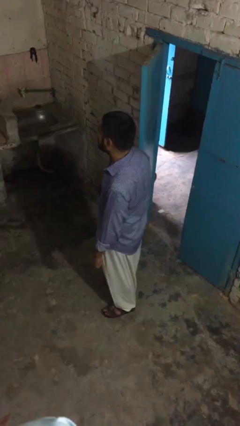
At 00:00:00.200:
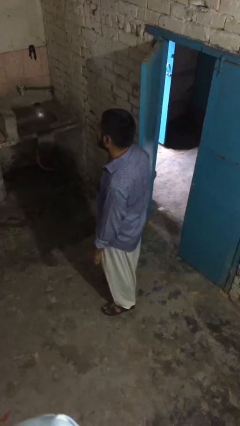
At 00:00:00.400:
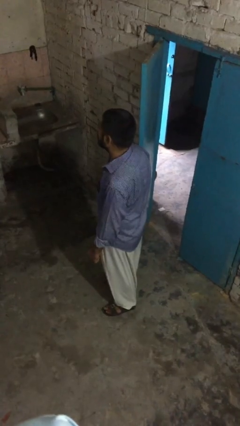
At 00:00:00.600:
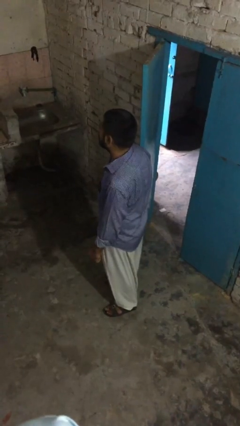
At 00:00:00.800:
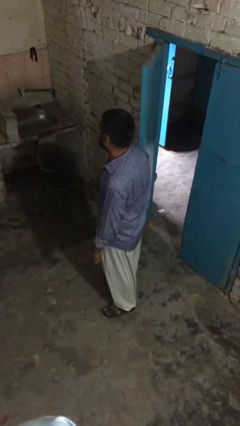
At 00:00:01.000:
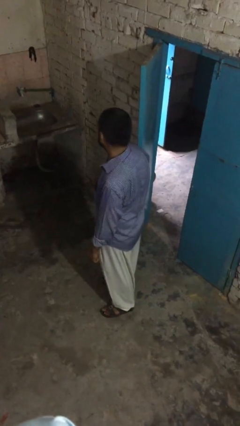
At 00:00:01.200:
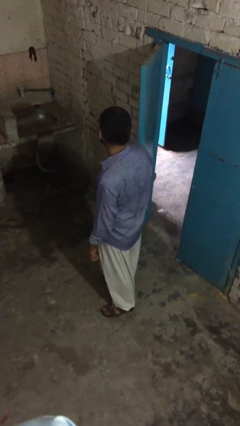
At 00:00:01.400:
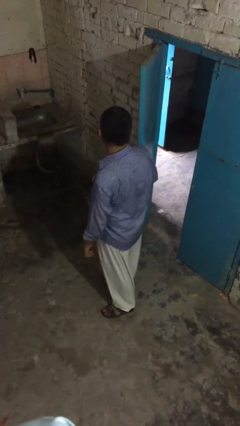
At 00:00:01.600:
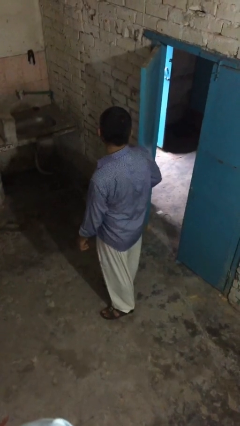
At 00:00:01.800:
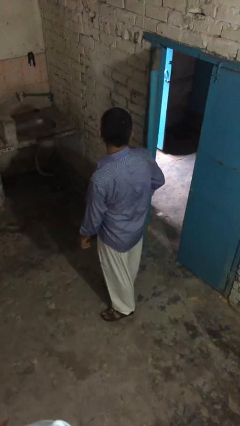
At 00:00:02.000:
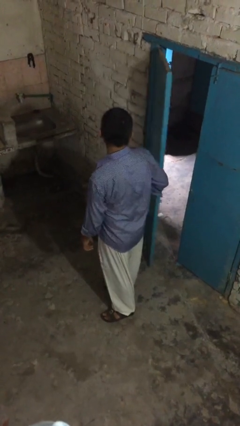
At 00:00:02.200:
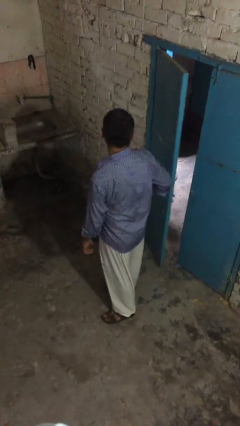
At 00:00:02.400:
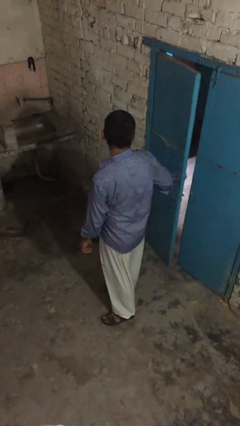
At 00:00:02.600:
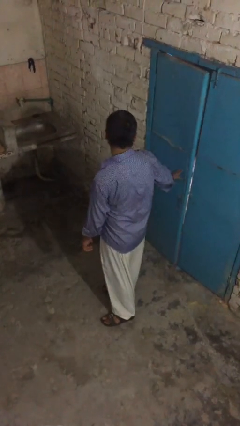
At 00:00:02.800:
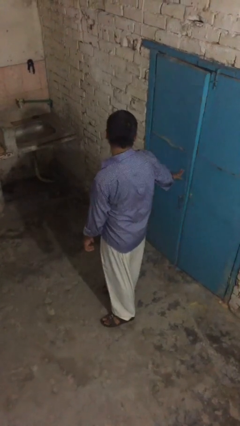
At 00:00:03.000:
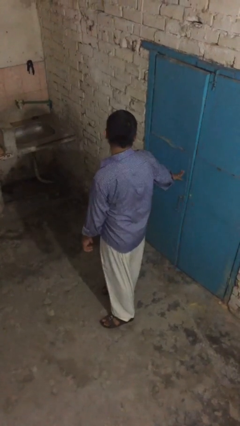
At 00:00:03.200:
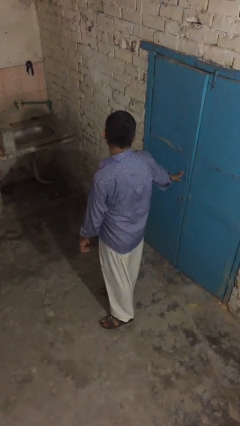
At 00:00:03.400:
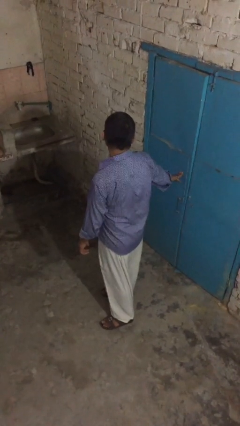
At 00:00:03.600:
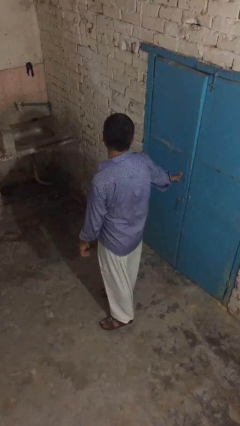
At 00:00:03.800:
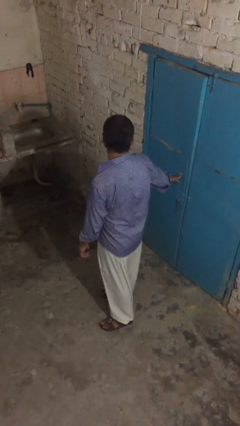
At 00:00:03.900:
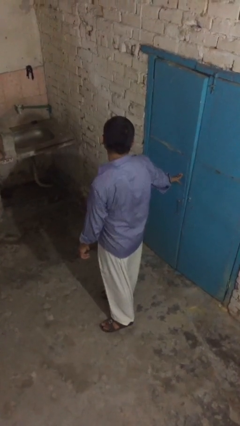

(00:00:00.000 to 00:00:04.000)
person closes facility door

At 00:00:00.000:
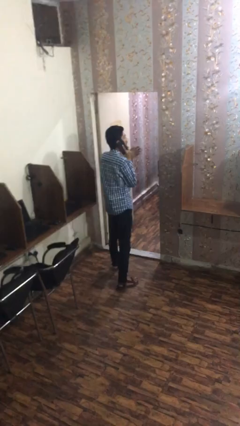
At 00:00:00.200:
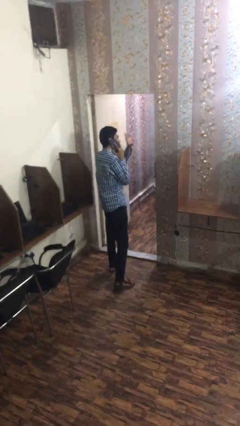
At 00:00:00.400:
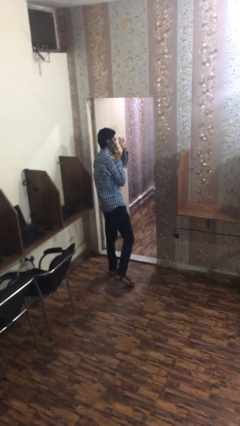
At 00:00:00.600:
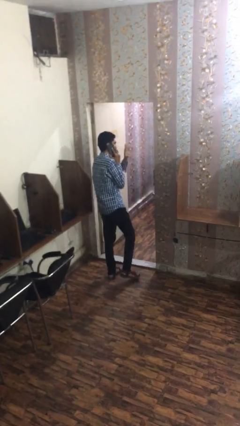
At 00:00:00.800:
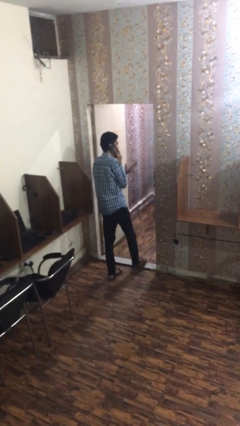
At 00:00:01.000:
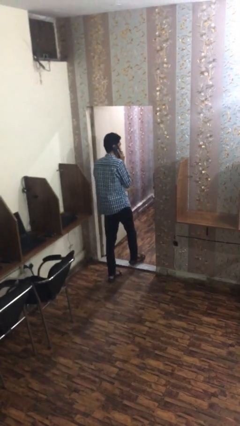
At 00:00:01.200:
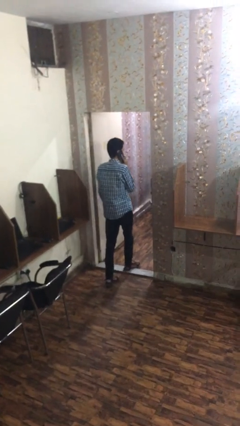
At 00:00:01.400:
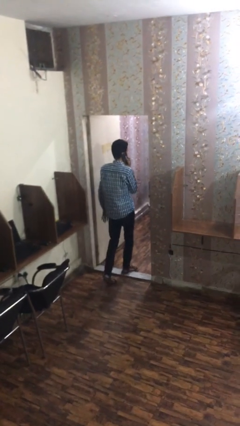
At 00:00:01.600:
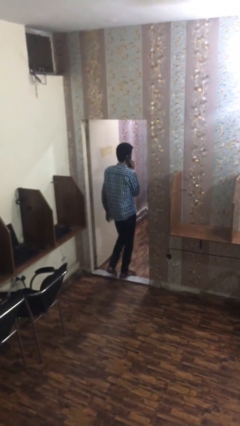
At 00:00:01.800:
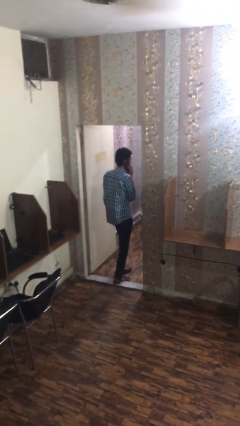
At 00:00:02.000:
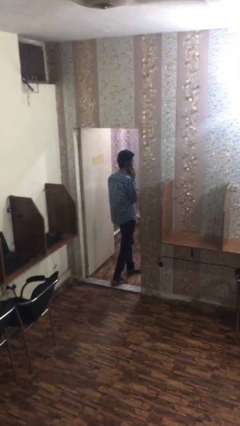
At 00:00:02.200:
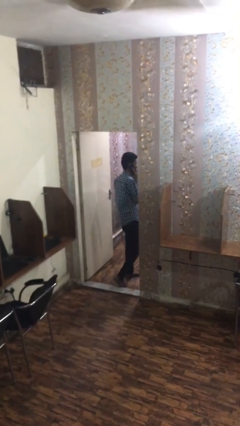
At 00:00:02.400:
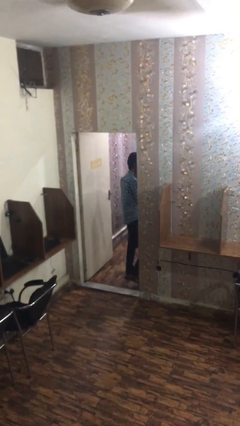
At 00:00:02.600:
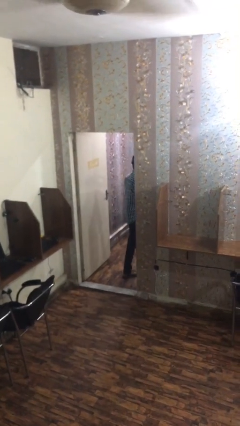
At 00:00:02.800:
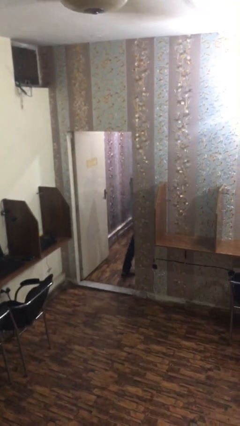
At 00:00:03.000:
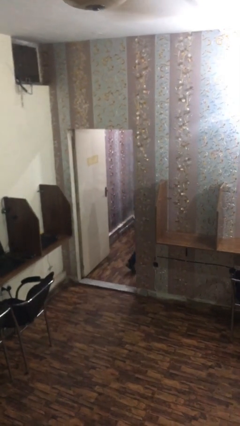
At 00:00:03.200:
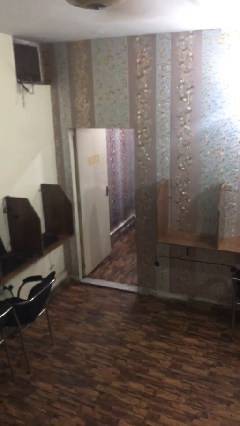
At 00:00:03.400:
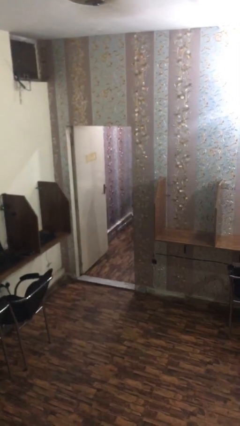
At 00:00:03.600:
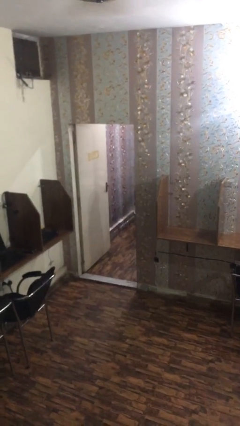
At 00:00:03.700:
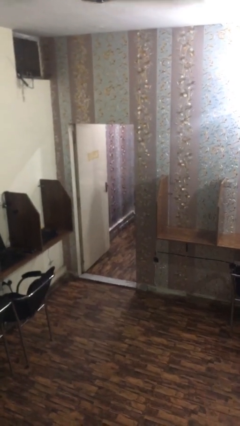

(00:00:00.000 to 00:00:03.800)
person exits scene through structure

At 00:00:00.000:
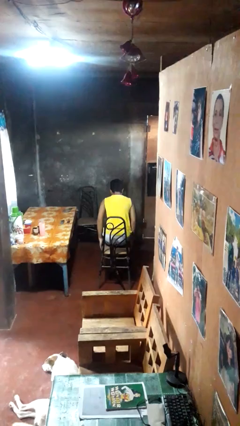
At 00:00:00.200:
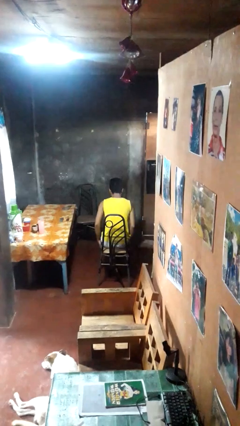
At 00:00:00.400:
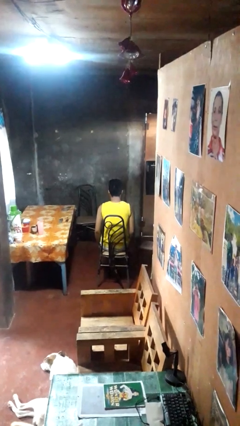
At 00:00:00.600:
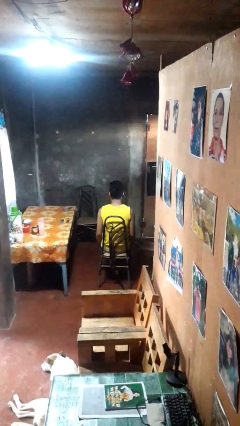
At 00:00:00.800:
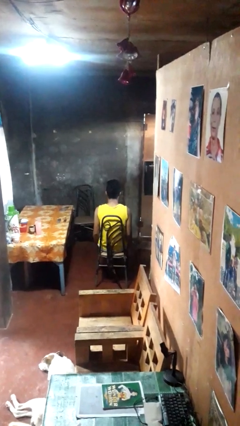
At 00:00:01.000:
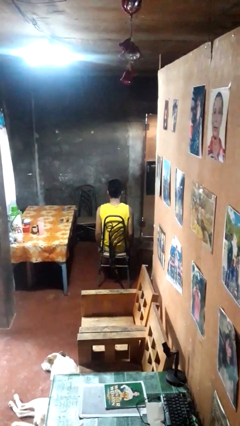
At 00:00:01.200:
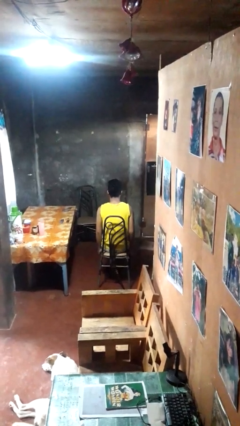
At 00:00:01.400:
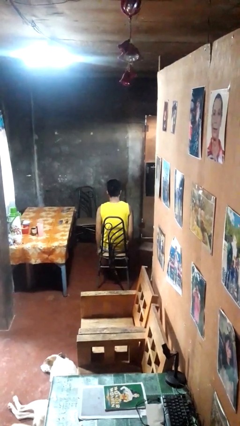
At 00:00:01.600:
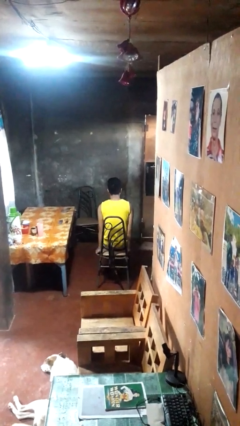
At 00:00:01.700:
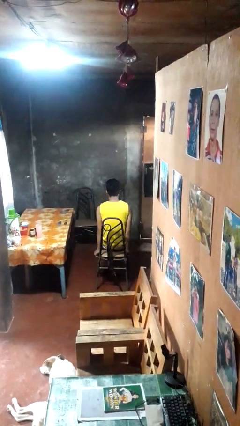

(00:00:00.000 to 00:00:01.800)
person sits down

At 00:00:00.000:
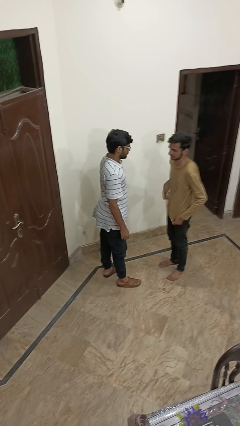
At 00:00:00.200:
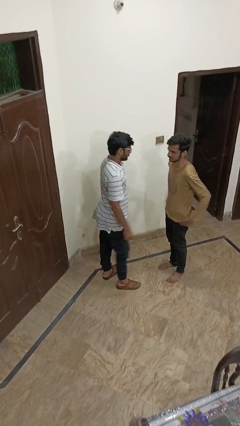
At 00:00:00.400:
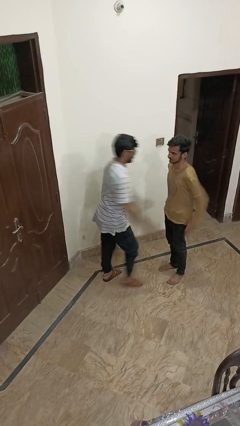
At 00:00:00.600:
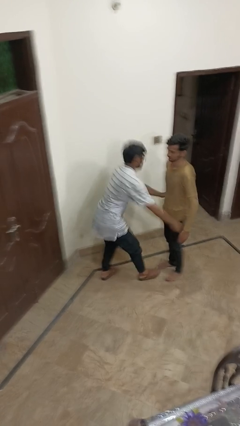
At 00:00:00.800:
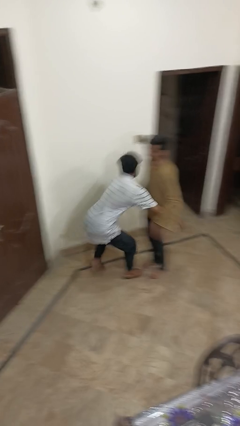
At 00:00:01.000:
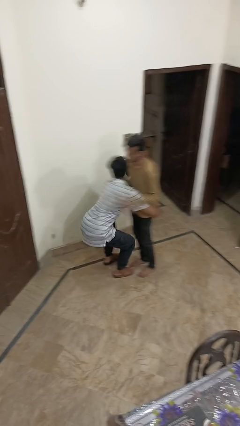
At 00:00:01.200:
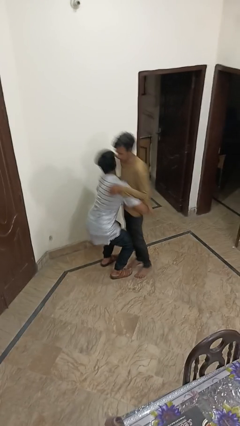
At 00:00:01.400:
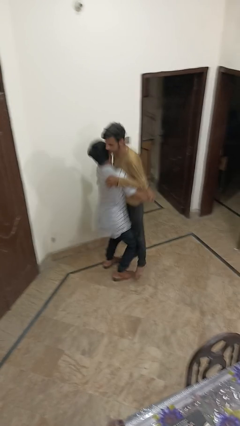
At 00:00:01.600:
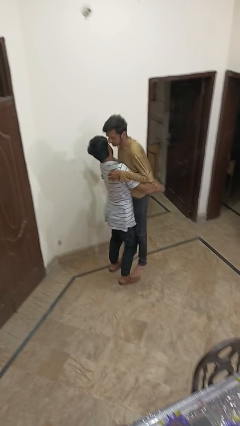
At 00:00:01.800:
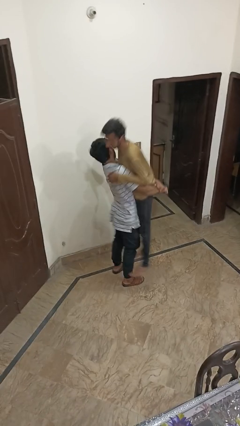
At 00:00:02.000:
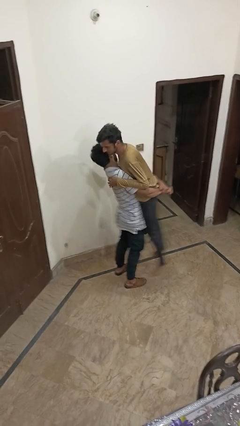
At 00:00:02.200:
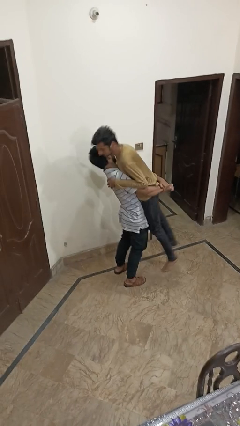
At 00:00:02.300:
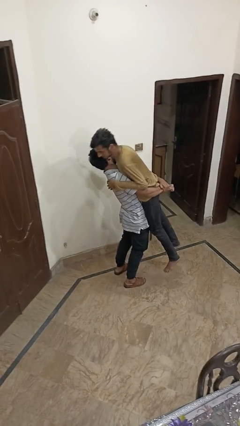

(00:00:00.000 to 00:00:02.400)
person picks up person

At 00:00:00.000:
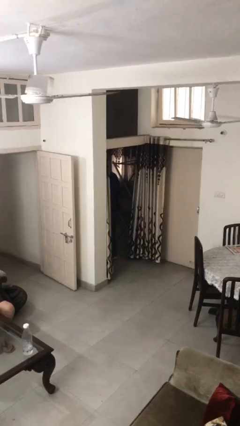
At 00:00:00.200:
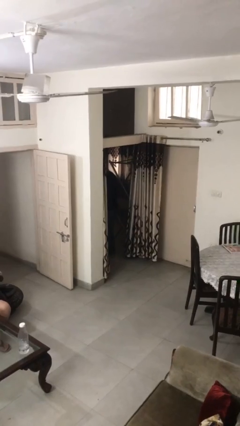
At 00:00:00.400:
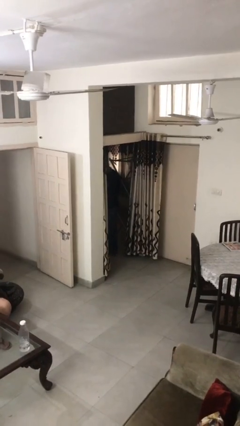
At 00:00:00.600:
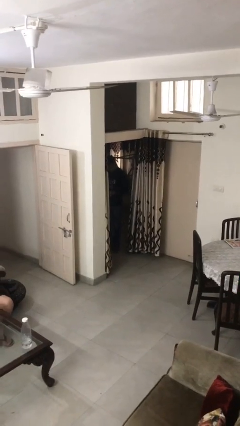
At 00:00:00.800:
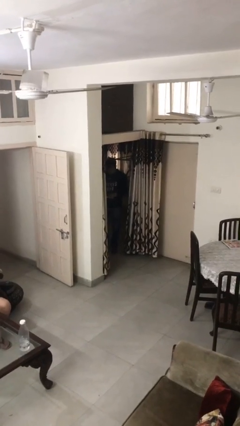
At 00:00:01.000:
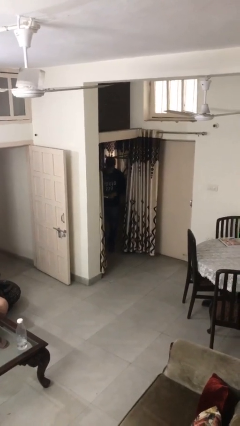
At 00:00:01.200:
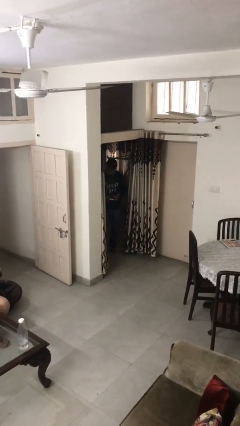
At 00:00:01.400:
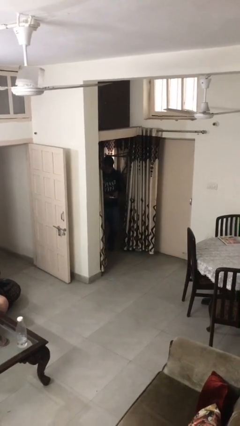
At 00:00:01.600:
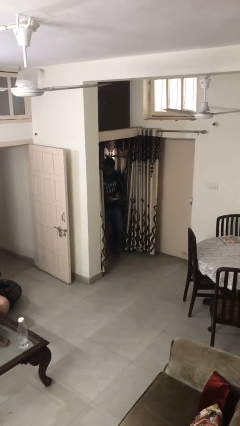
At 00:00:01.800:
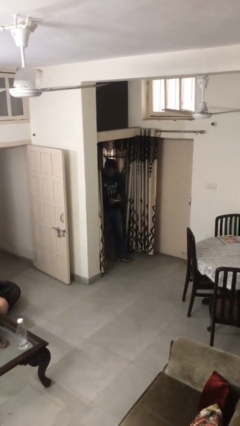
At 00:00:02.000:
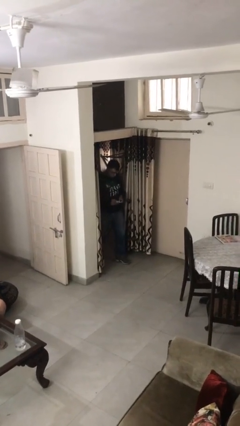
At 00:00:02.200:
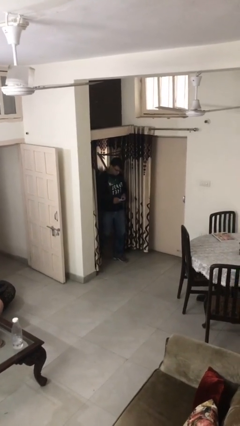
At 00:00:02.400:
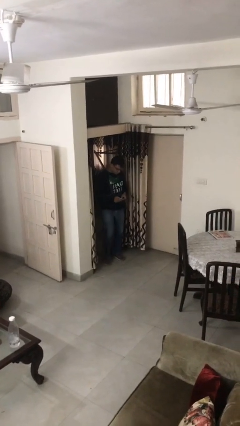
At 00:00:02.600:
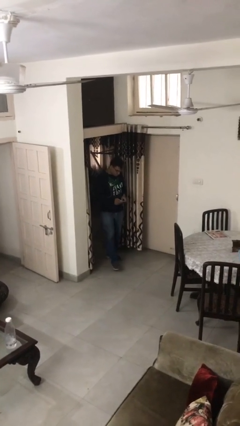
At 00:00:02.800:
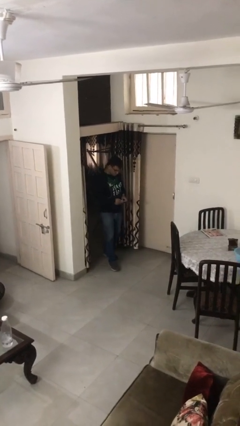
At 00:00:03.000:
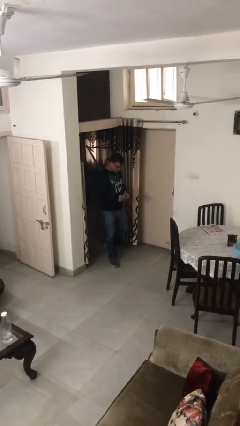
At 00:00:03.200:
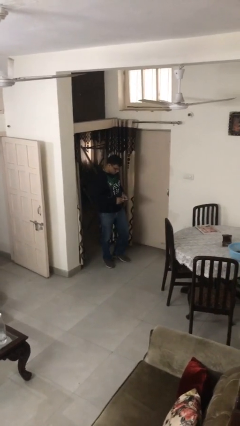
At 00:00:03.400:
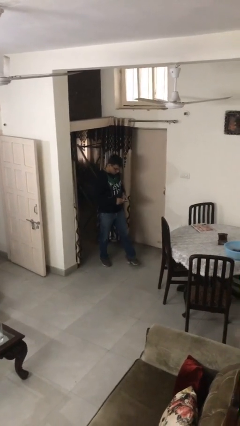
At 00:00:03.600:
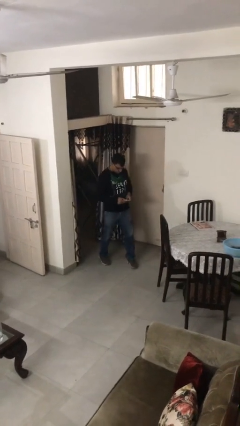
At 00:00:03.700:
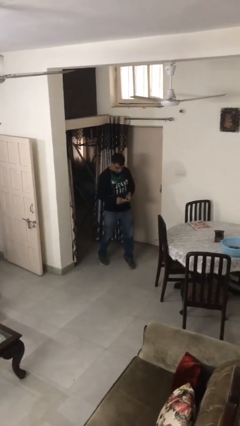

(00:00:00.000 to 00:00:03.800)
person enters scene through structure

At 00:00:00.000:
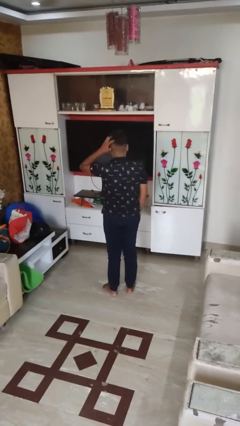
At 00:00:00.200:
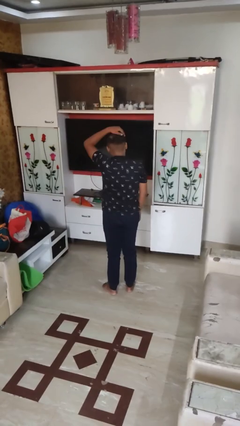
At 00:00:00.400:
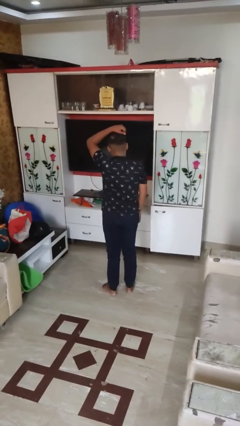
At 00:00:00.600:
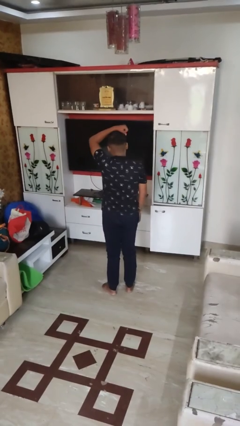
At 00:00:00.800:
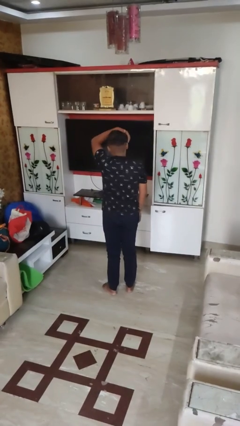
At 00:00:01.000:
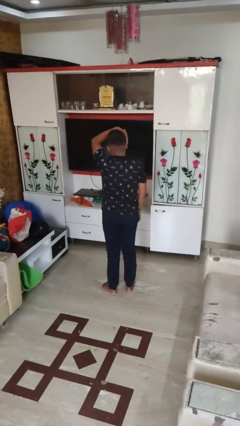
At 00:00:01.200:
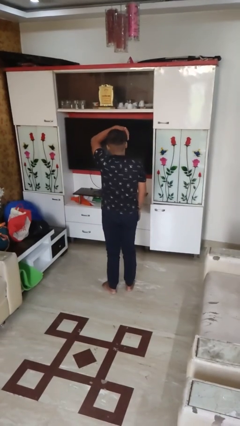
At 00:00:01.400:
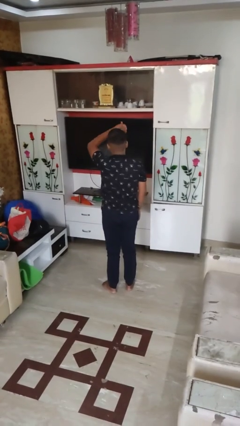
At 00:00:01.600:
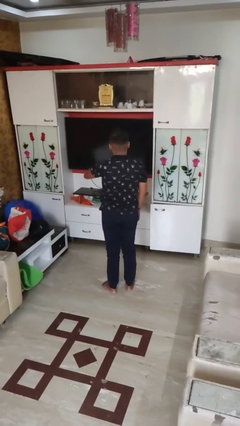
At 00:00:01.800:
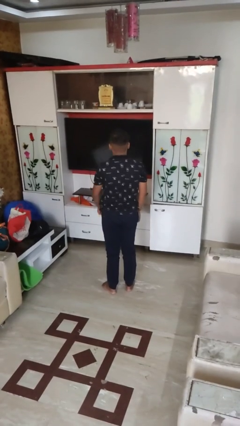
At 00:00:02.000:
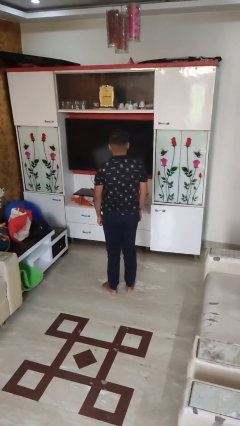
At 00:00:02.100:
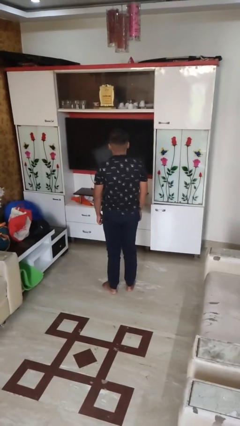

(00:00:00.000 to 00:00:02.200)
person strokes hair
